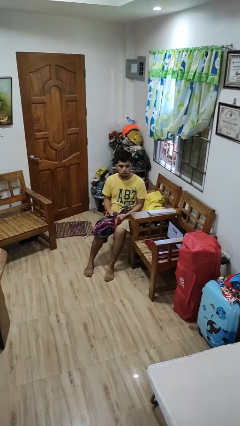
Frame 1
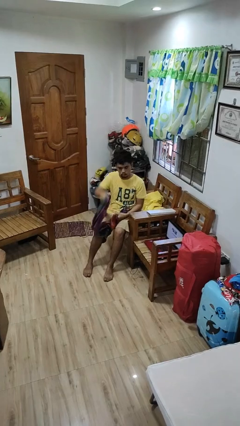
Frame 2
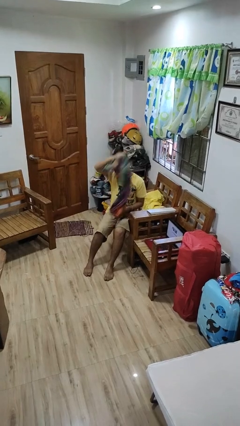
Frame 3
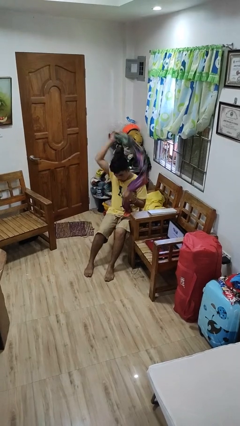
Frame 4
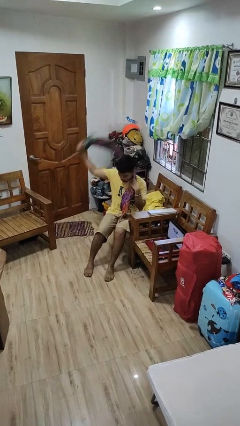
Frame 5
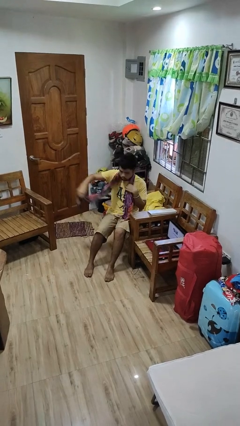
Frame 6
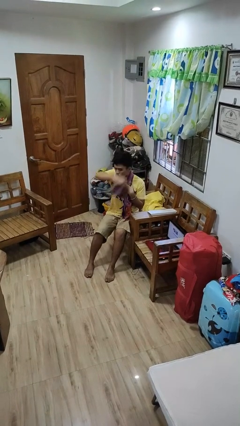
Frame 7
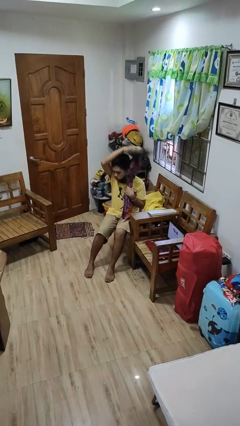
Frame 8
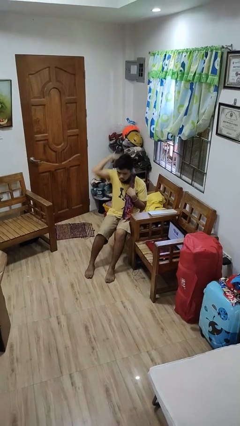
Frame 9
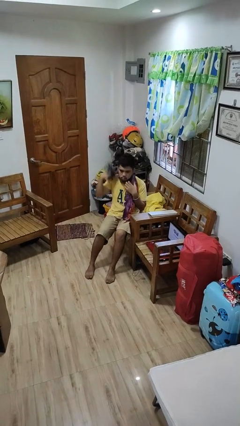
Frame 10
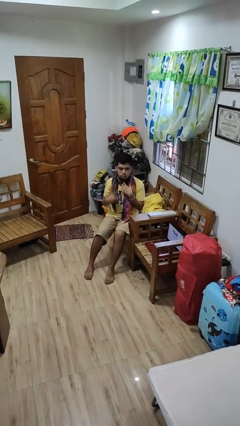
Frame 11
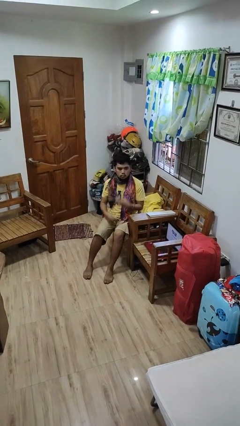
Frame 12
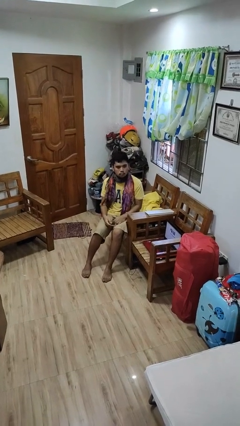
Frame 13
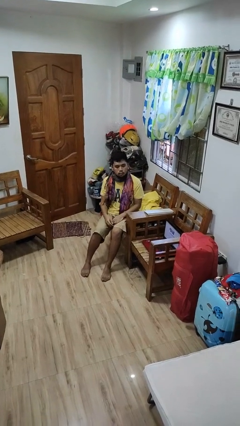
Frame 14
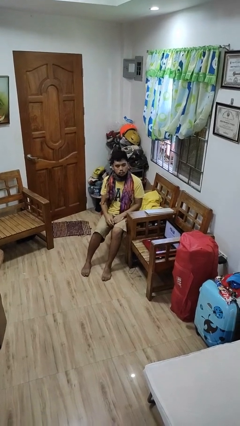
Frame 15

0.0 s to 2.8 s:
person puts on scarf

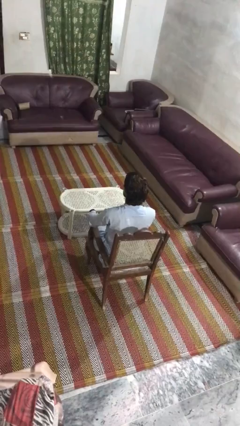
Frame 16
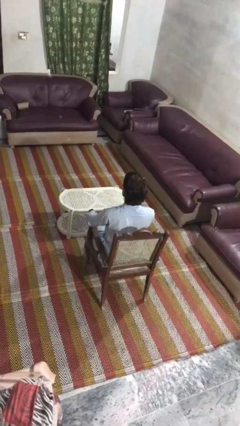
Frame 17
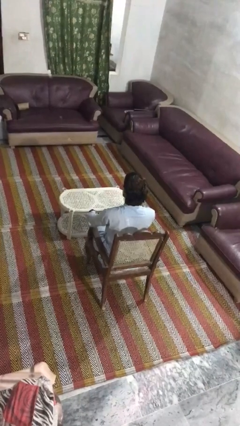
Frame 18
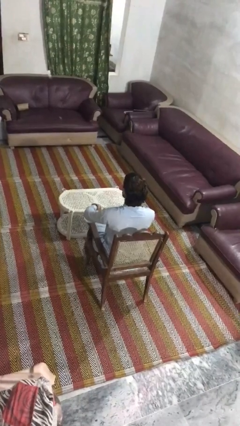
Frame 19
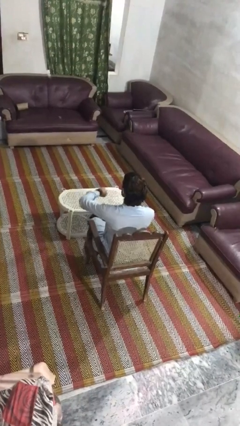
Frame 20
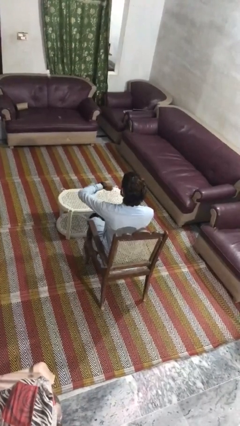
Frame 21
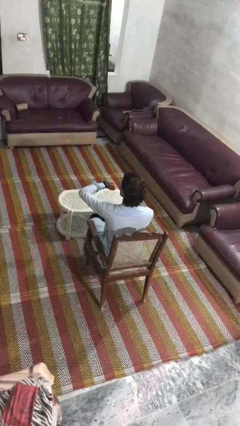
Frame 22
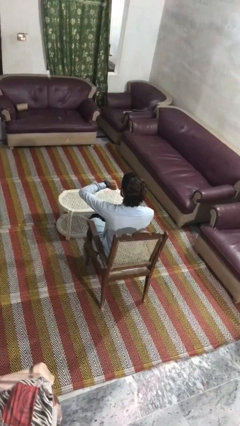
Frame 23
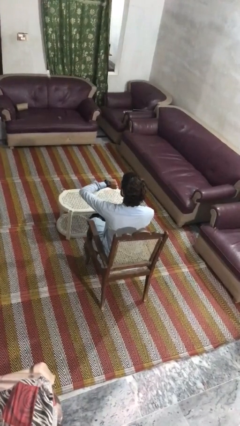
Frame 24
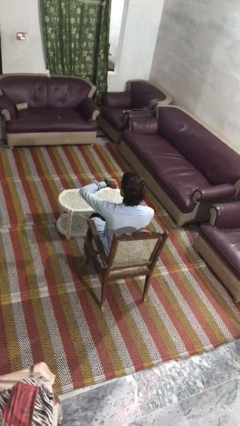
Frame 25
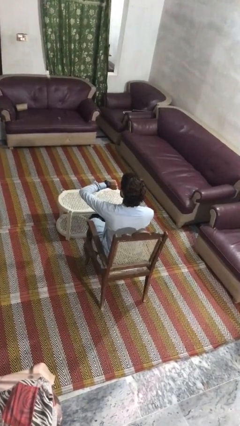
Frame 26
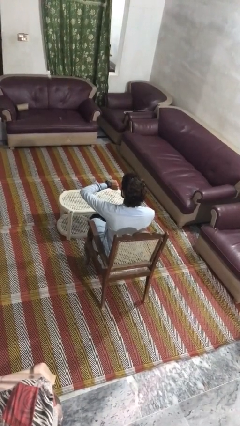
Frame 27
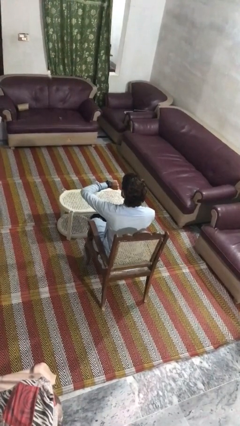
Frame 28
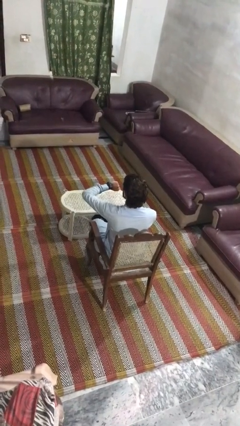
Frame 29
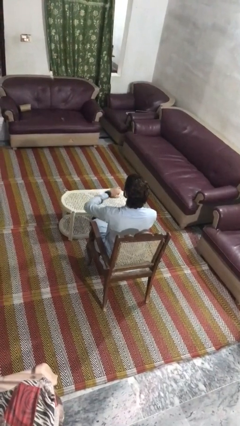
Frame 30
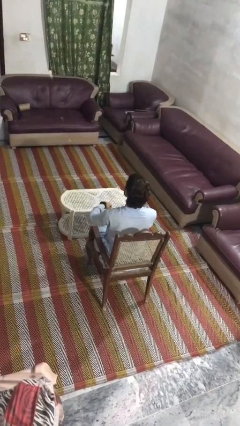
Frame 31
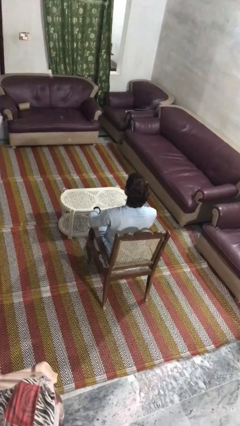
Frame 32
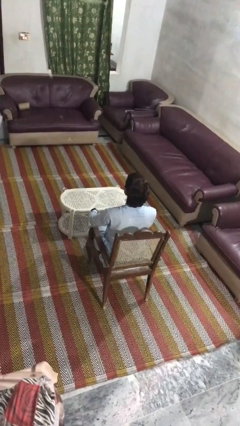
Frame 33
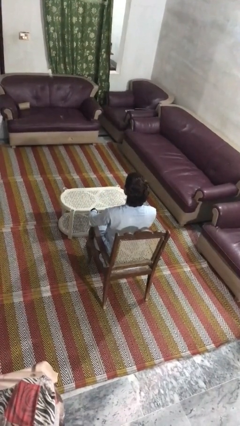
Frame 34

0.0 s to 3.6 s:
person looks at wristwatch

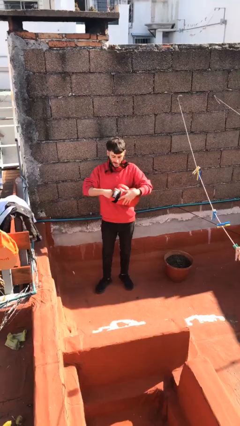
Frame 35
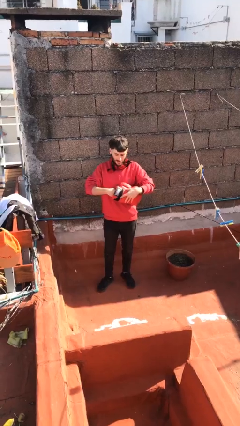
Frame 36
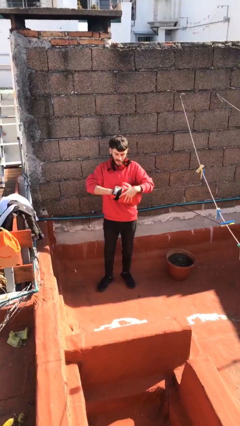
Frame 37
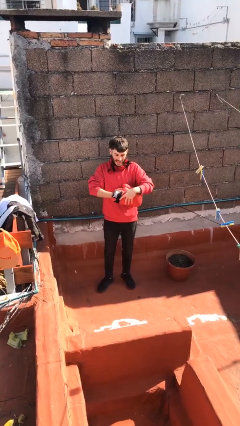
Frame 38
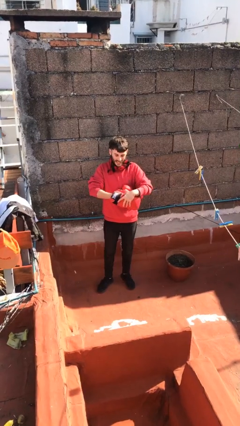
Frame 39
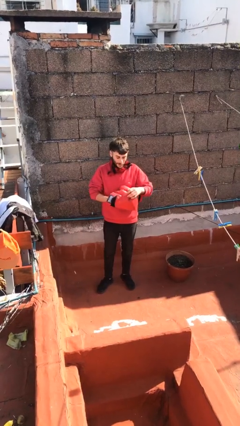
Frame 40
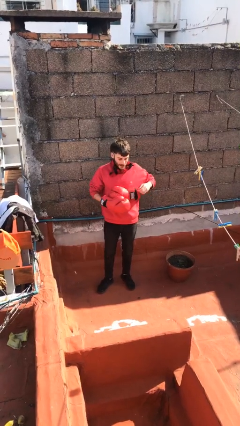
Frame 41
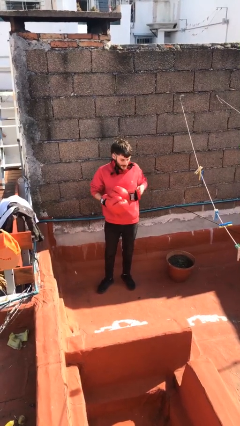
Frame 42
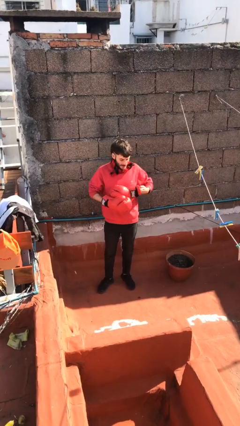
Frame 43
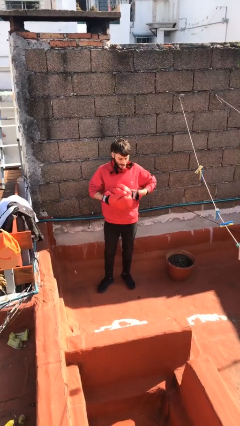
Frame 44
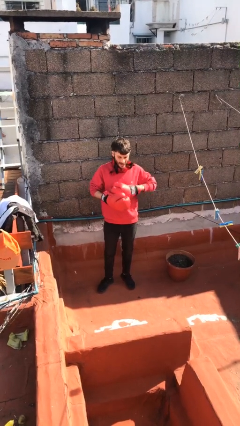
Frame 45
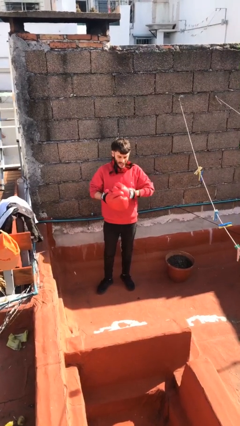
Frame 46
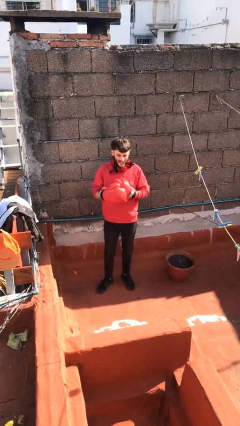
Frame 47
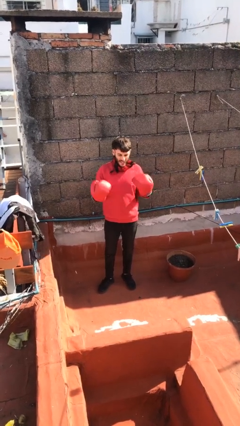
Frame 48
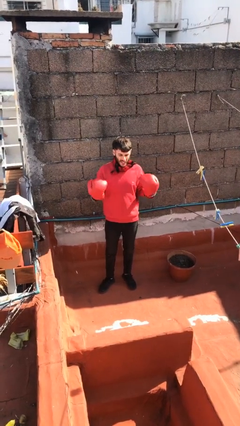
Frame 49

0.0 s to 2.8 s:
person puts on gloves

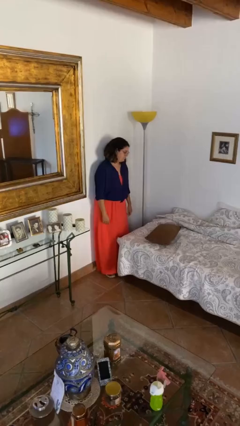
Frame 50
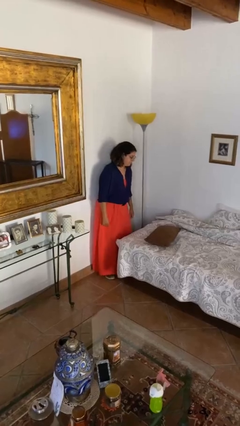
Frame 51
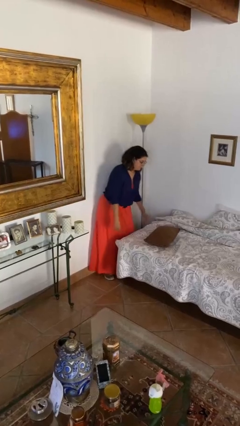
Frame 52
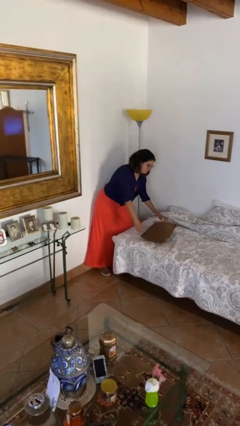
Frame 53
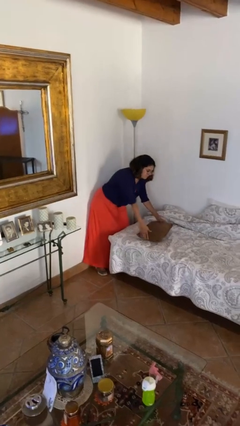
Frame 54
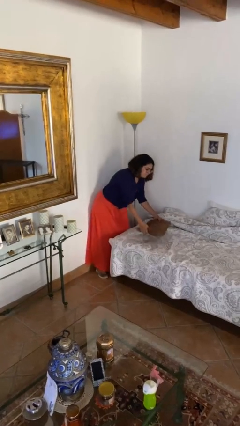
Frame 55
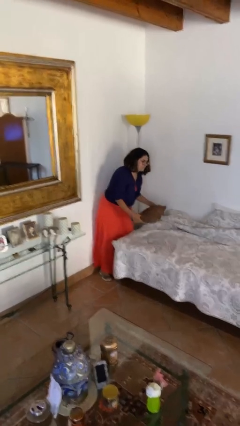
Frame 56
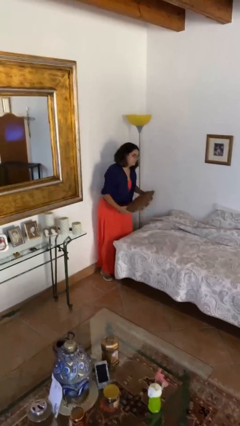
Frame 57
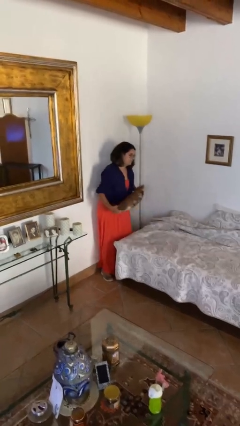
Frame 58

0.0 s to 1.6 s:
person picks up object from bed

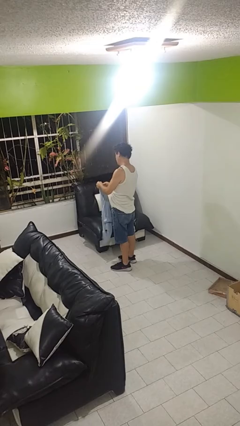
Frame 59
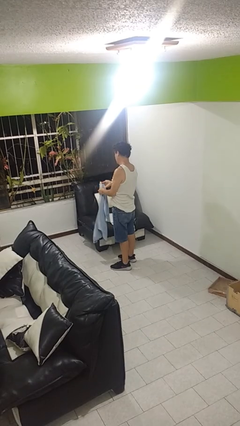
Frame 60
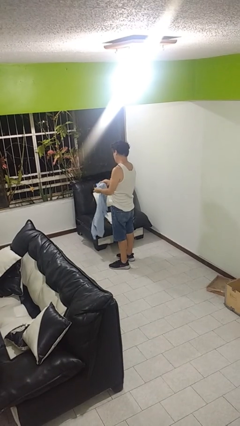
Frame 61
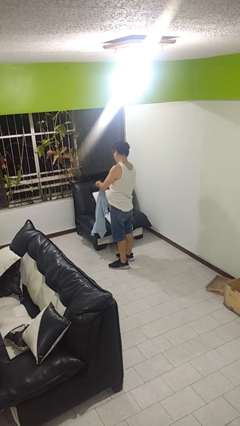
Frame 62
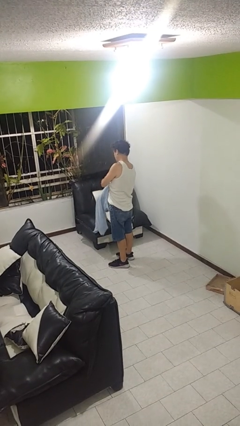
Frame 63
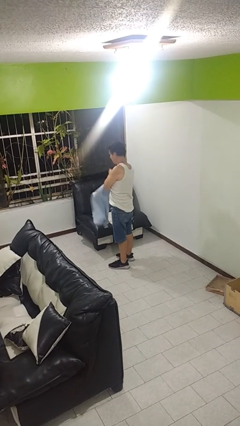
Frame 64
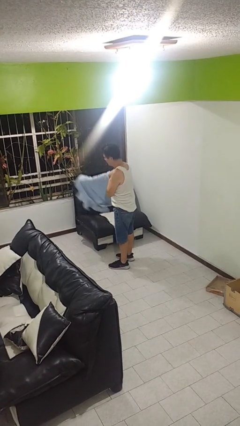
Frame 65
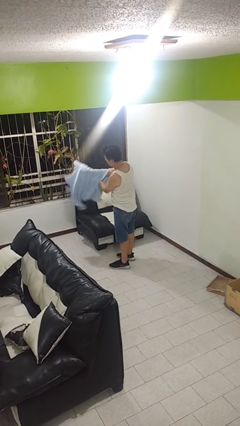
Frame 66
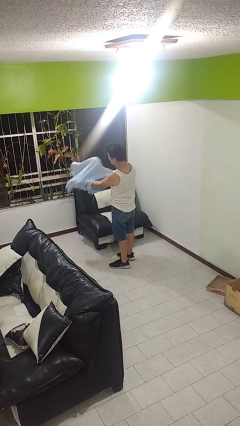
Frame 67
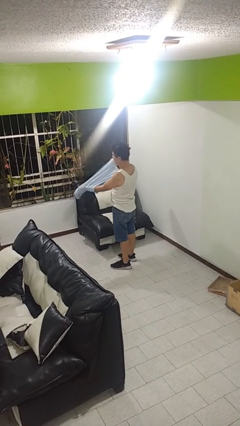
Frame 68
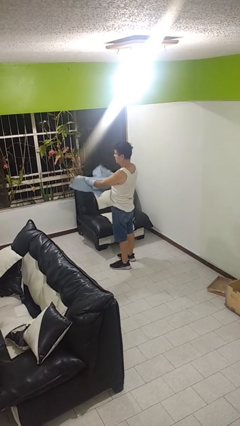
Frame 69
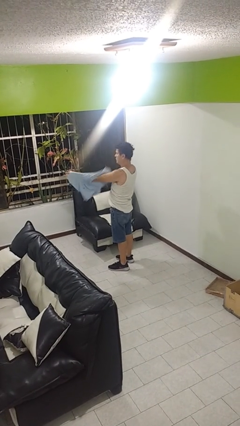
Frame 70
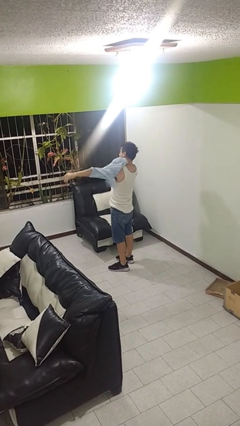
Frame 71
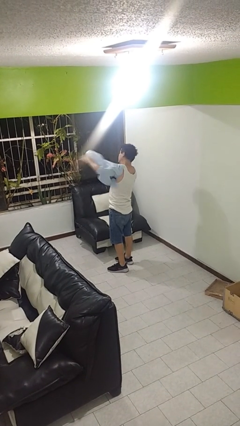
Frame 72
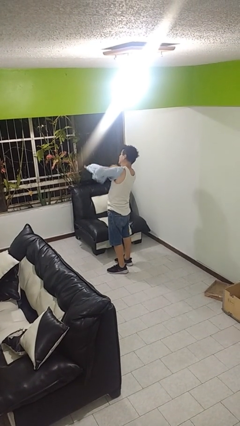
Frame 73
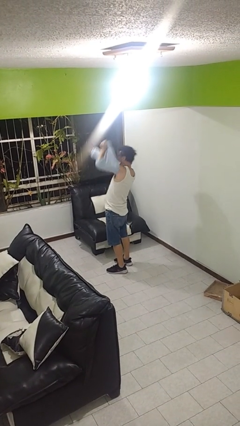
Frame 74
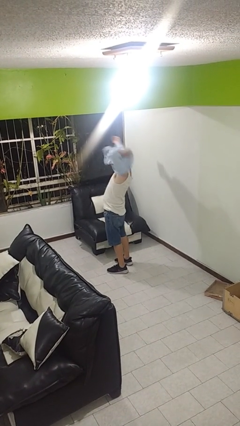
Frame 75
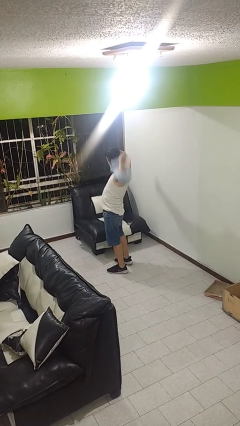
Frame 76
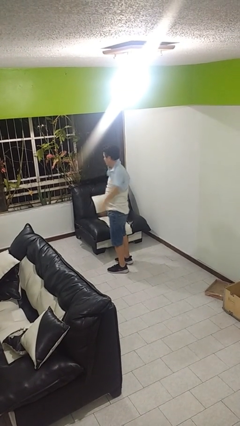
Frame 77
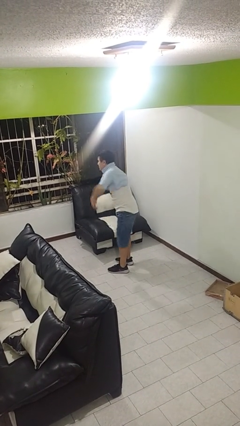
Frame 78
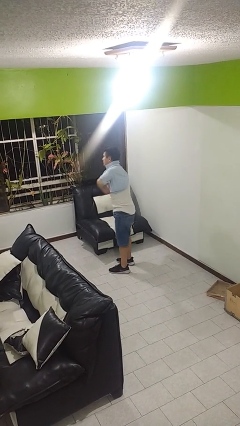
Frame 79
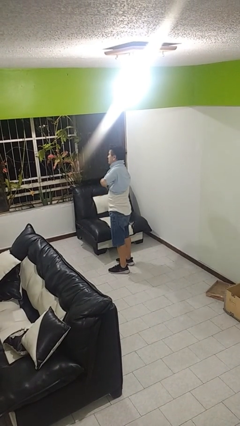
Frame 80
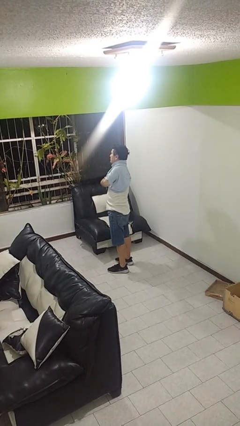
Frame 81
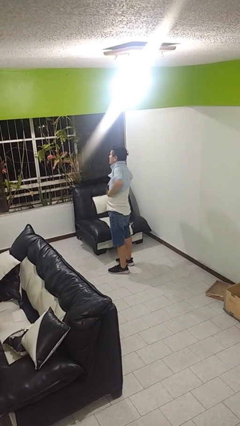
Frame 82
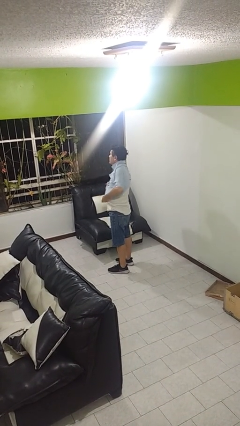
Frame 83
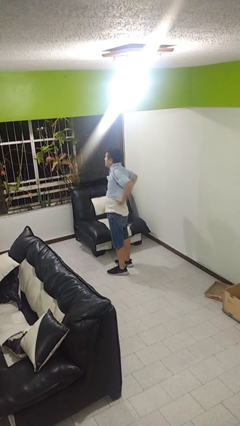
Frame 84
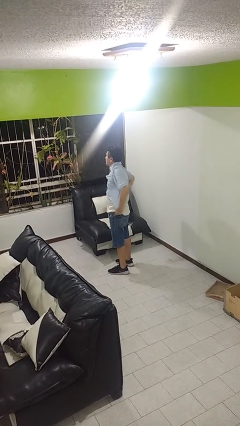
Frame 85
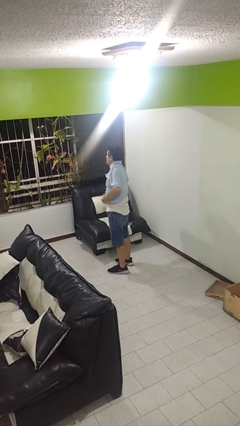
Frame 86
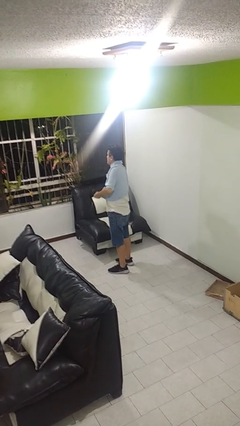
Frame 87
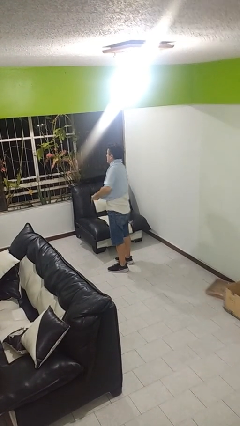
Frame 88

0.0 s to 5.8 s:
person puts on shirt

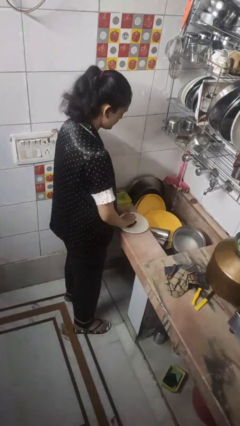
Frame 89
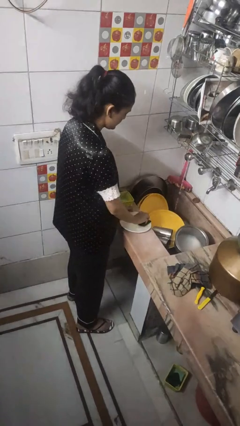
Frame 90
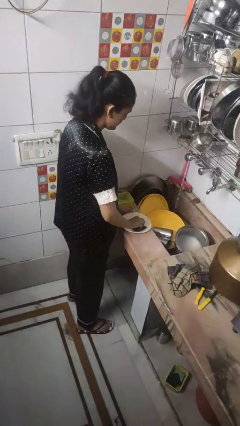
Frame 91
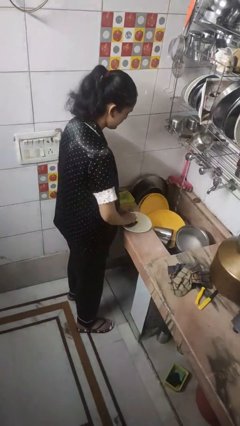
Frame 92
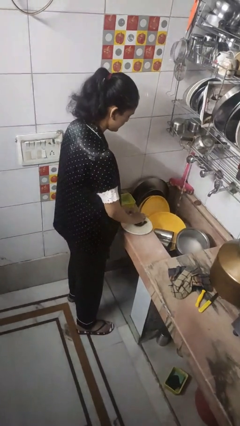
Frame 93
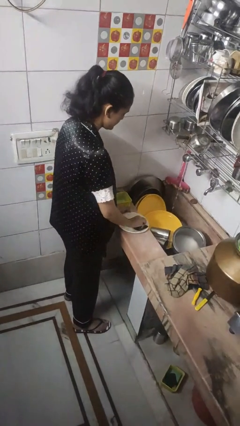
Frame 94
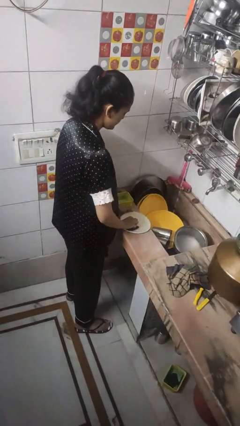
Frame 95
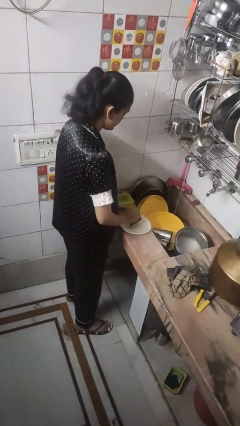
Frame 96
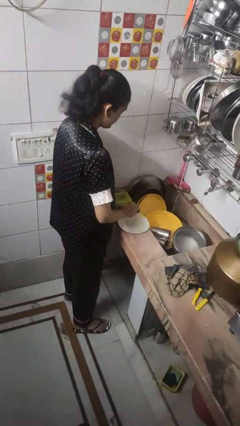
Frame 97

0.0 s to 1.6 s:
person washes dish
